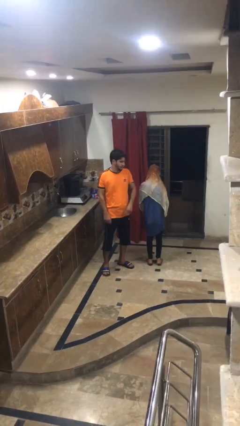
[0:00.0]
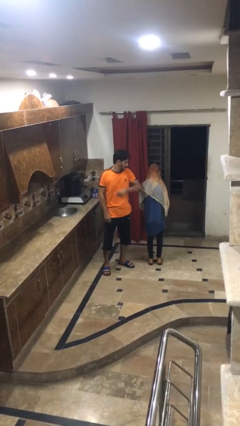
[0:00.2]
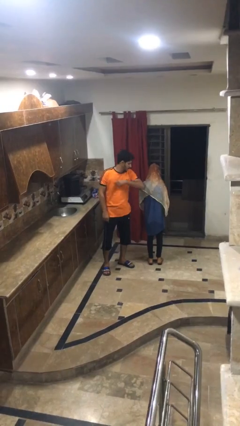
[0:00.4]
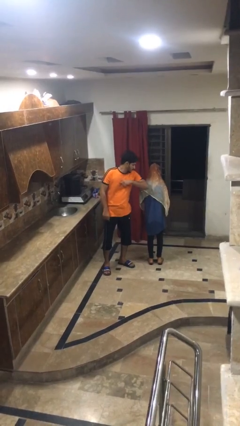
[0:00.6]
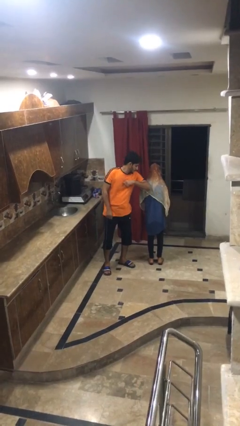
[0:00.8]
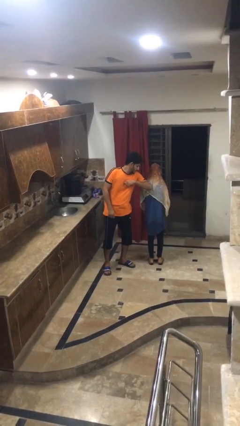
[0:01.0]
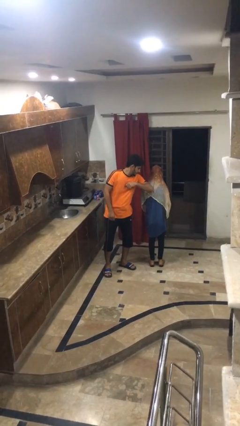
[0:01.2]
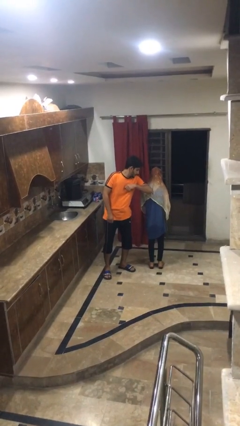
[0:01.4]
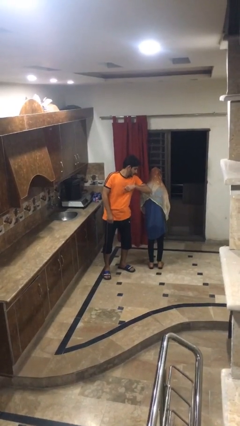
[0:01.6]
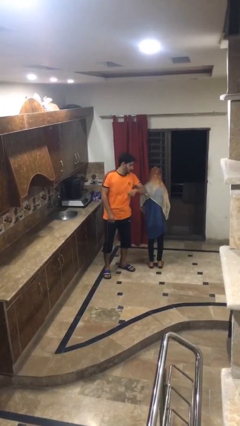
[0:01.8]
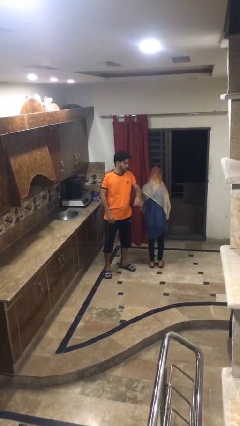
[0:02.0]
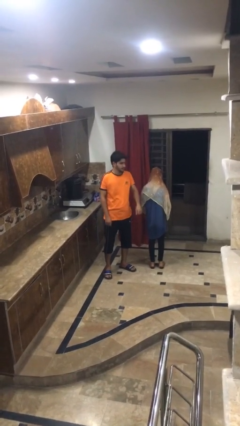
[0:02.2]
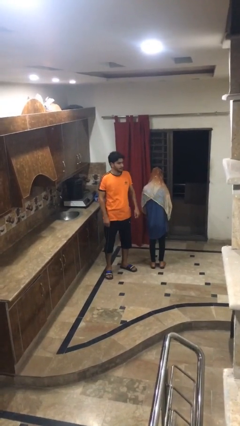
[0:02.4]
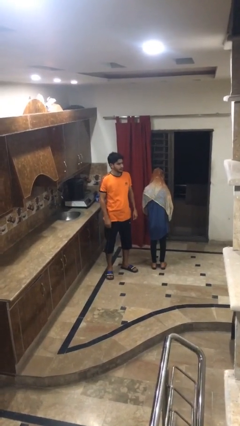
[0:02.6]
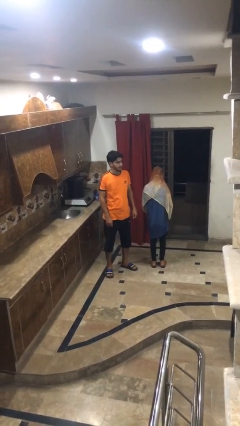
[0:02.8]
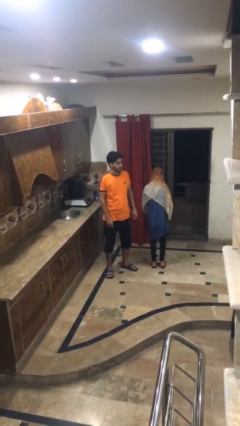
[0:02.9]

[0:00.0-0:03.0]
person nudges person with elbow

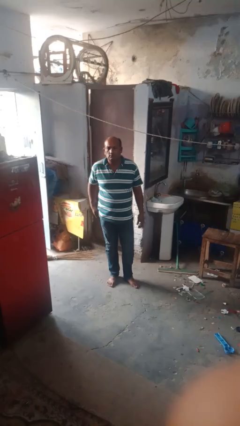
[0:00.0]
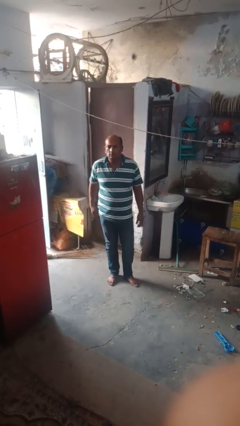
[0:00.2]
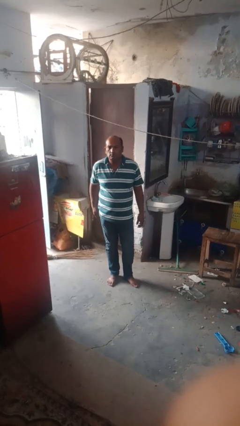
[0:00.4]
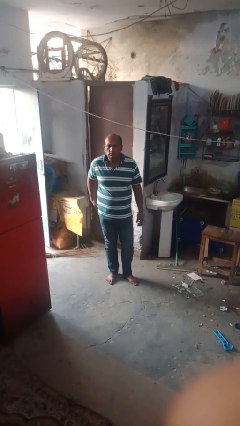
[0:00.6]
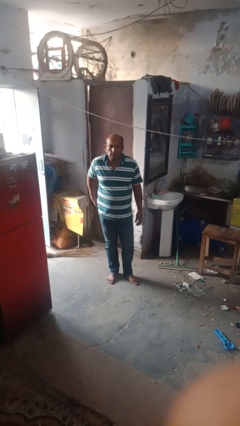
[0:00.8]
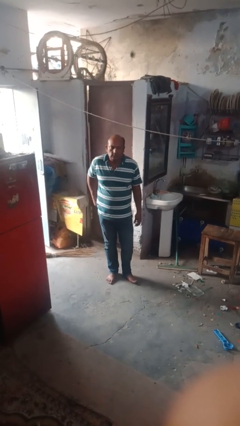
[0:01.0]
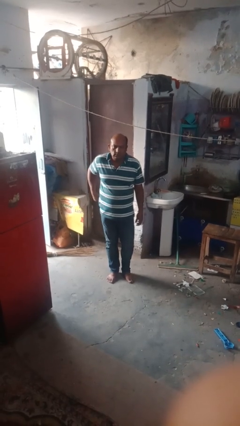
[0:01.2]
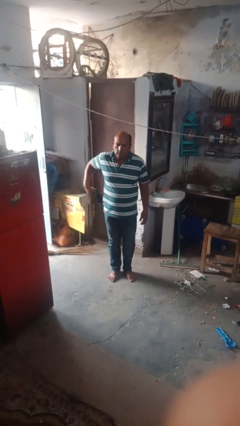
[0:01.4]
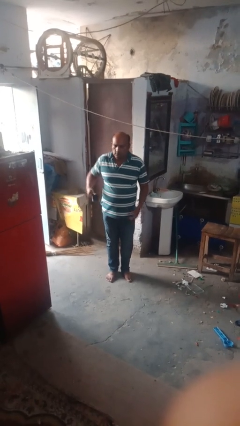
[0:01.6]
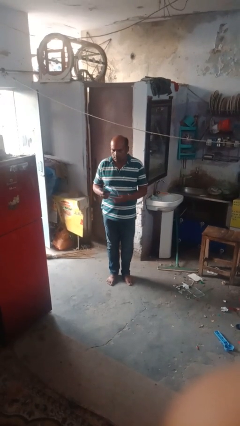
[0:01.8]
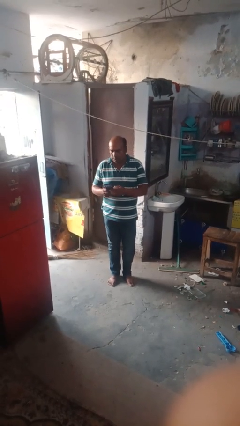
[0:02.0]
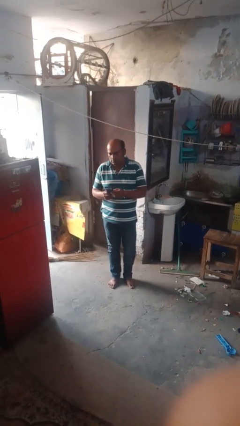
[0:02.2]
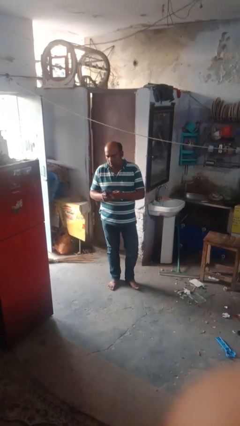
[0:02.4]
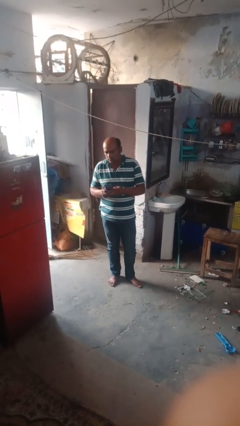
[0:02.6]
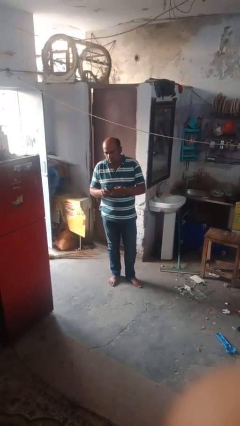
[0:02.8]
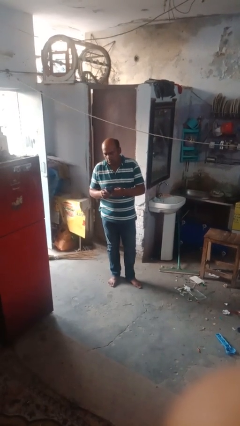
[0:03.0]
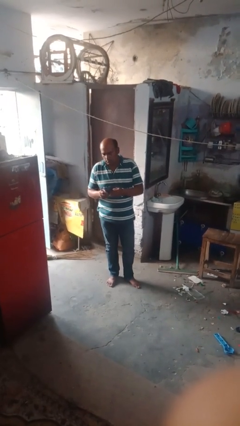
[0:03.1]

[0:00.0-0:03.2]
person takes phone from pocket

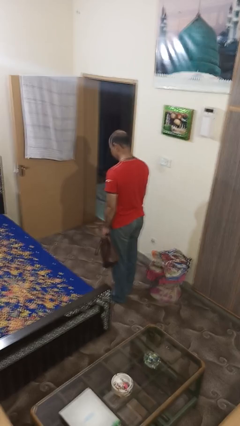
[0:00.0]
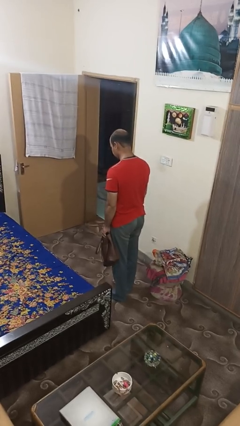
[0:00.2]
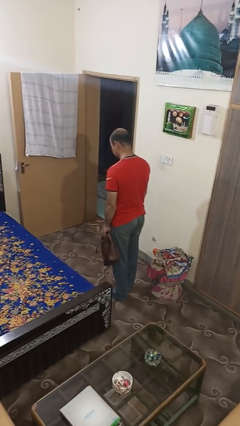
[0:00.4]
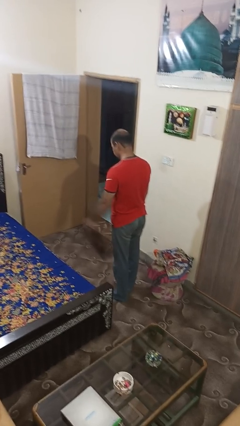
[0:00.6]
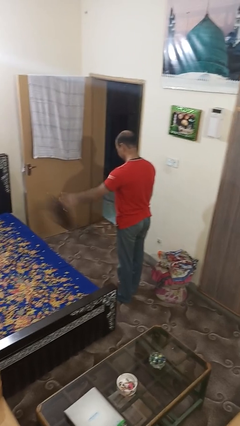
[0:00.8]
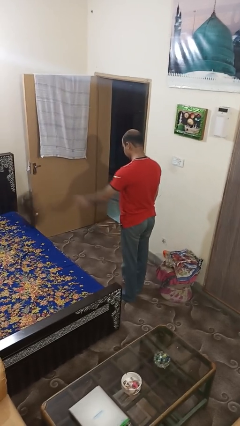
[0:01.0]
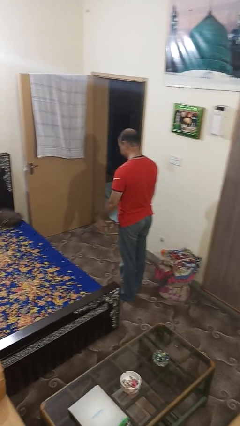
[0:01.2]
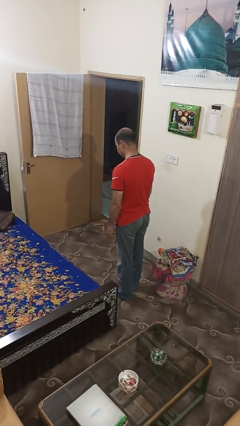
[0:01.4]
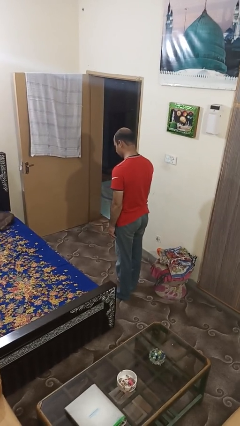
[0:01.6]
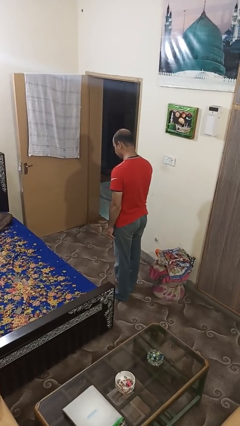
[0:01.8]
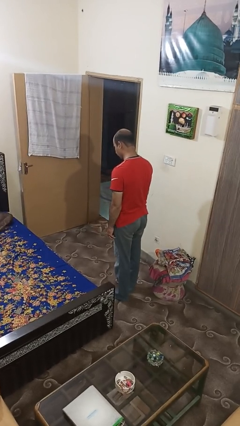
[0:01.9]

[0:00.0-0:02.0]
person throws object on bed

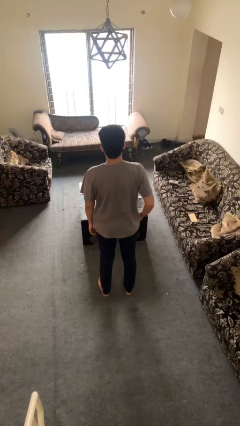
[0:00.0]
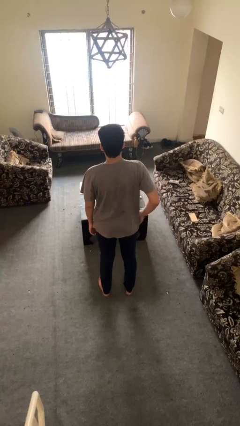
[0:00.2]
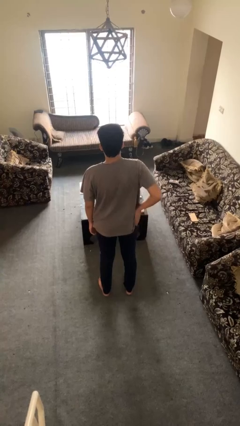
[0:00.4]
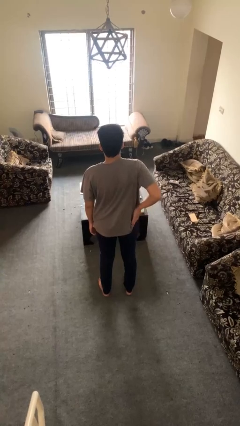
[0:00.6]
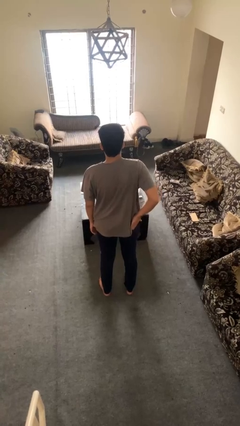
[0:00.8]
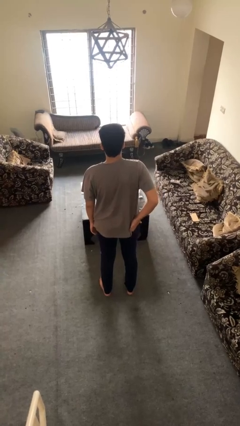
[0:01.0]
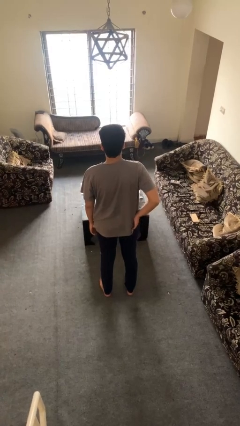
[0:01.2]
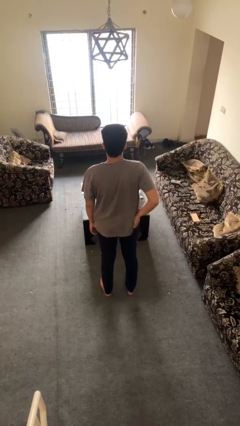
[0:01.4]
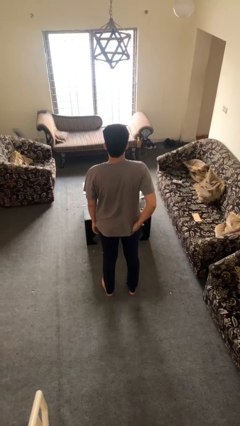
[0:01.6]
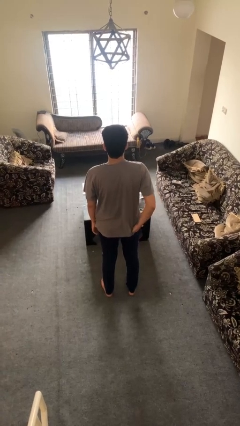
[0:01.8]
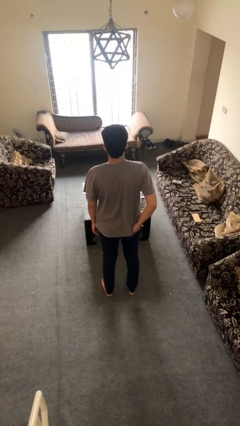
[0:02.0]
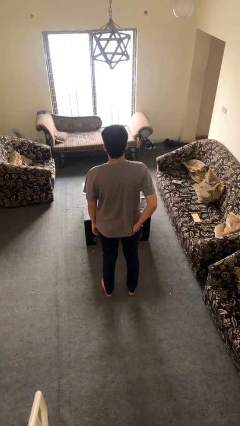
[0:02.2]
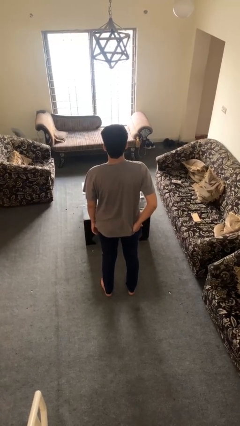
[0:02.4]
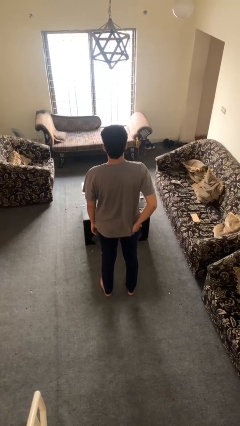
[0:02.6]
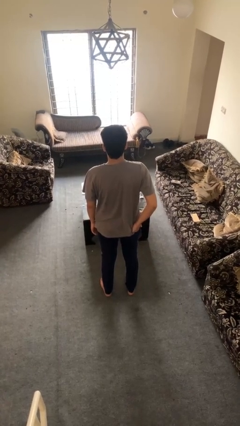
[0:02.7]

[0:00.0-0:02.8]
person puts hands in back pockets

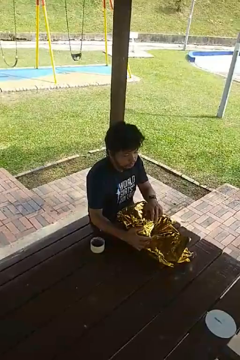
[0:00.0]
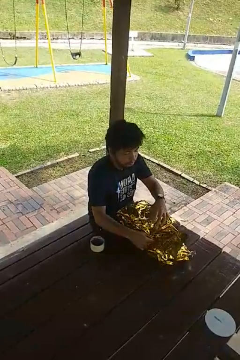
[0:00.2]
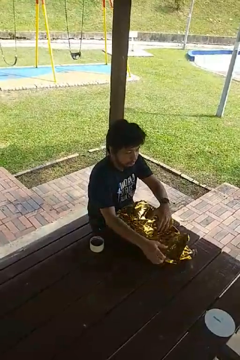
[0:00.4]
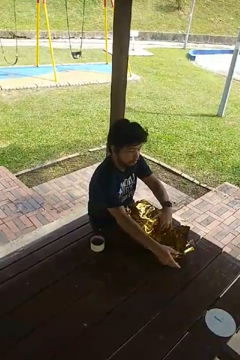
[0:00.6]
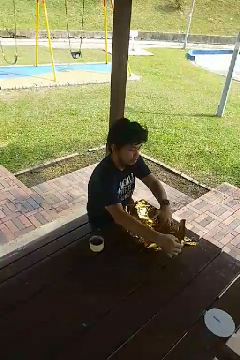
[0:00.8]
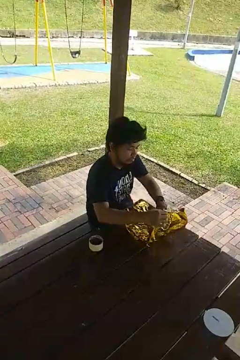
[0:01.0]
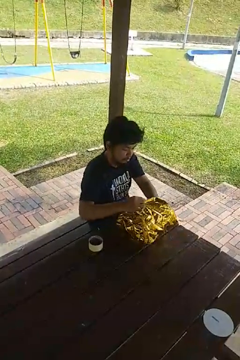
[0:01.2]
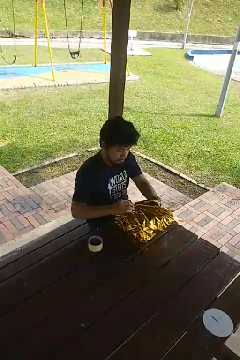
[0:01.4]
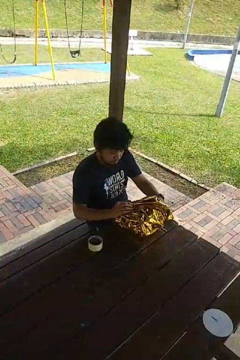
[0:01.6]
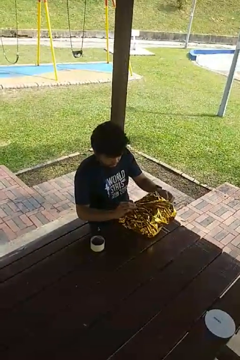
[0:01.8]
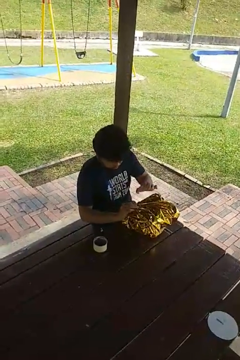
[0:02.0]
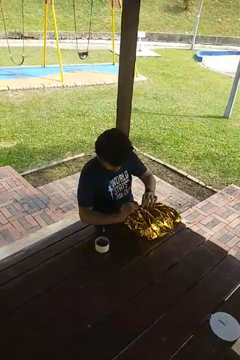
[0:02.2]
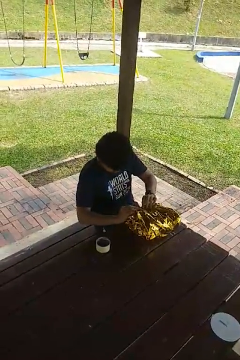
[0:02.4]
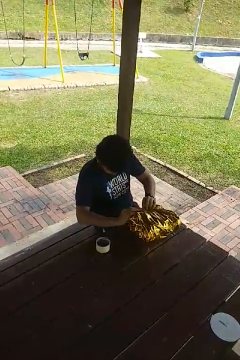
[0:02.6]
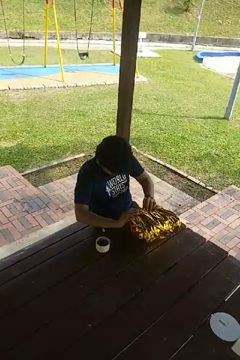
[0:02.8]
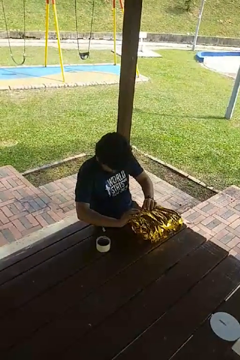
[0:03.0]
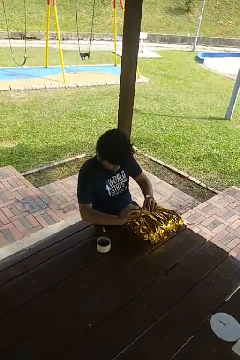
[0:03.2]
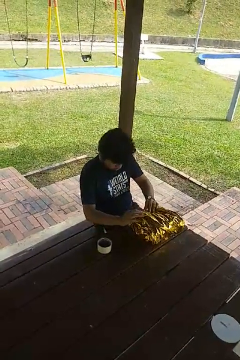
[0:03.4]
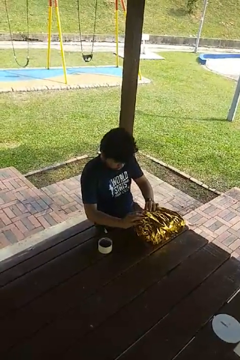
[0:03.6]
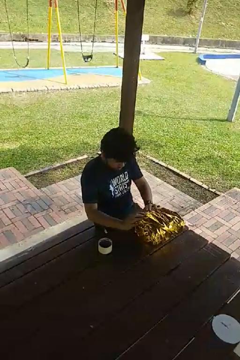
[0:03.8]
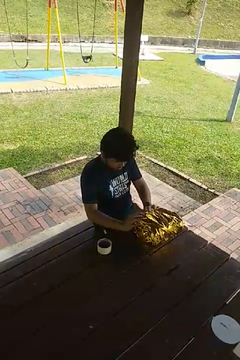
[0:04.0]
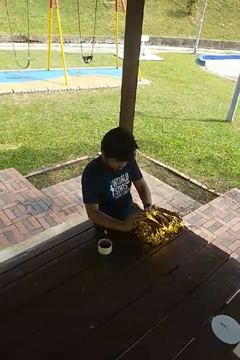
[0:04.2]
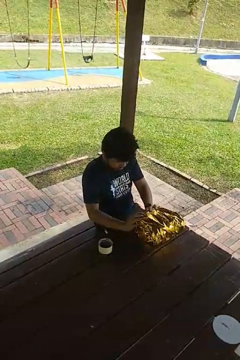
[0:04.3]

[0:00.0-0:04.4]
person wraps box

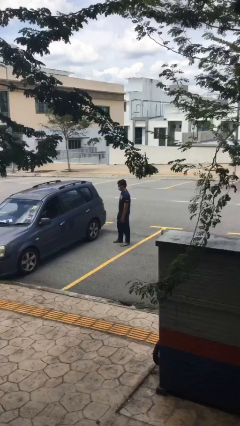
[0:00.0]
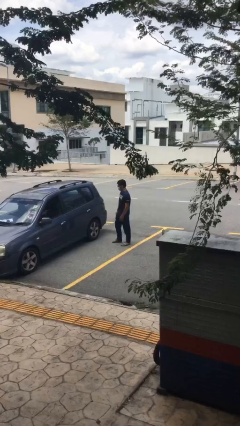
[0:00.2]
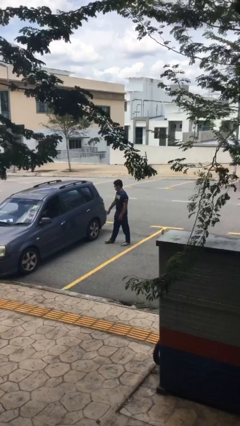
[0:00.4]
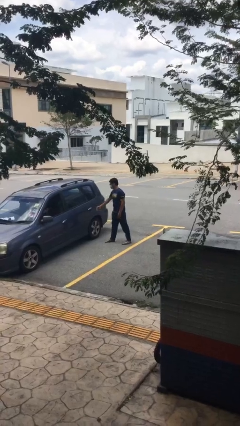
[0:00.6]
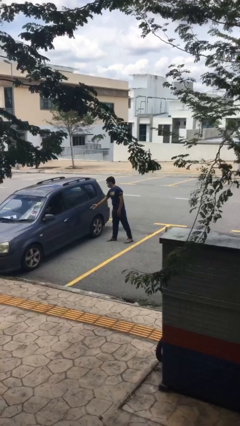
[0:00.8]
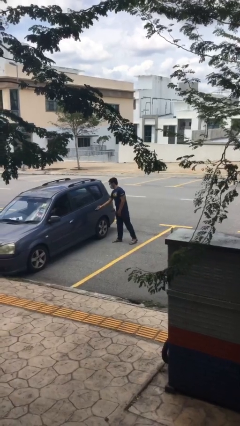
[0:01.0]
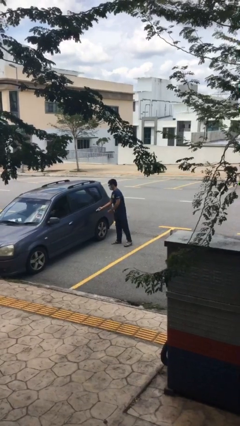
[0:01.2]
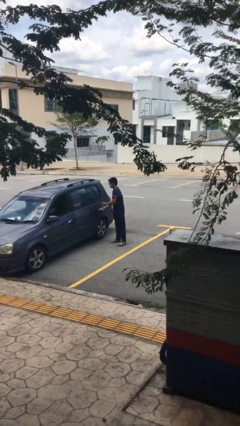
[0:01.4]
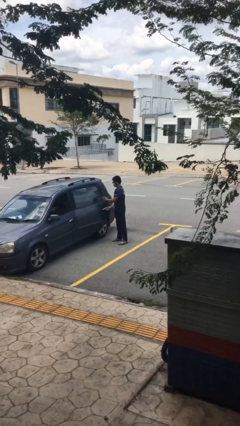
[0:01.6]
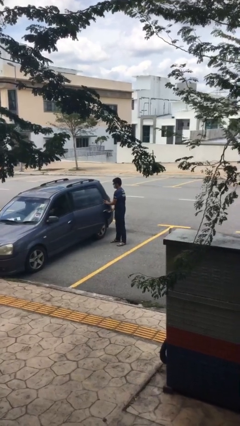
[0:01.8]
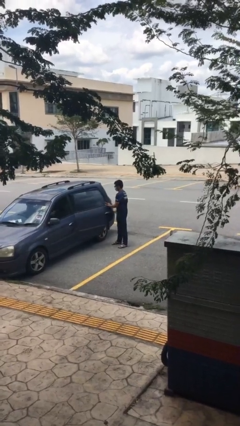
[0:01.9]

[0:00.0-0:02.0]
person opens car door

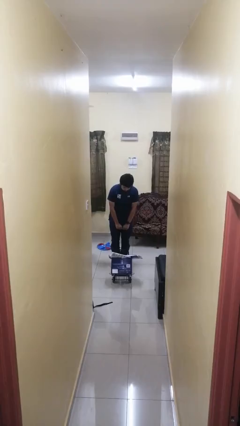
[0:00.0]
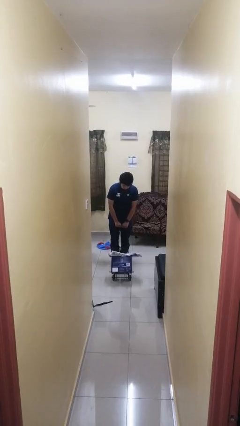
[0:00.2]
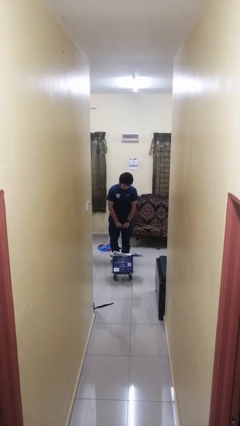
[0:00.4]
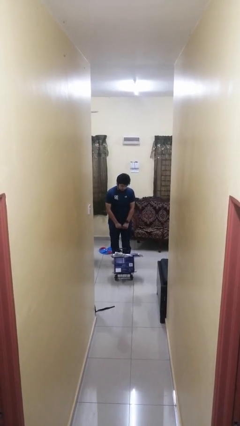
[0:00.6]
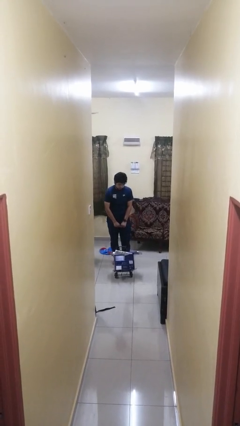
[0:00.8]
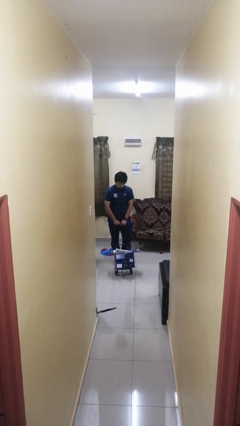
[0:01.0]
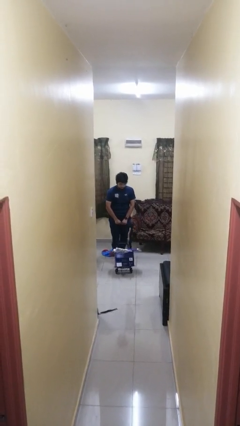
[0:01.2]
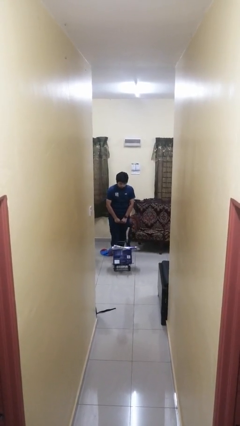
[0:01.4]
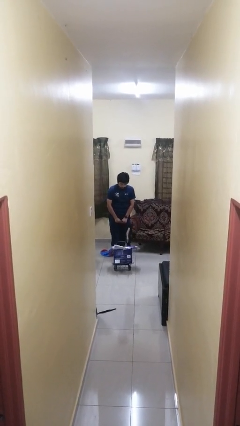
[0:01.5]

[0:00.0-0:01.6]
person pulls wheeled cart
